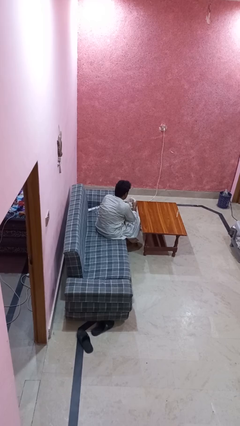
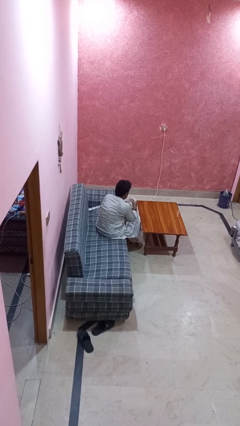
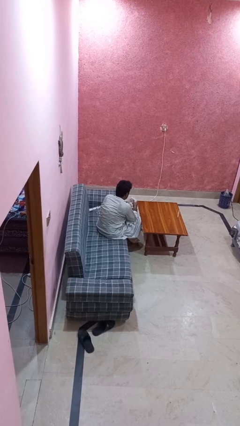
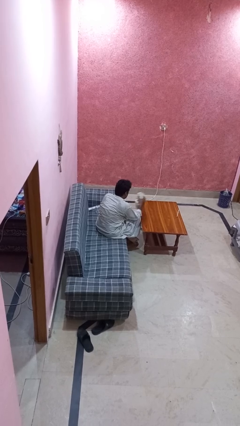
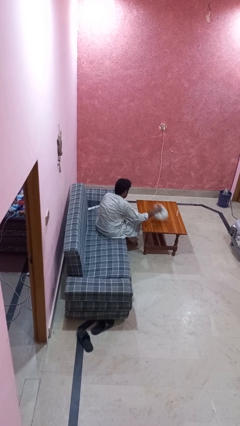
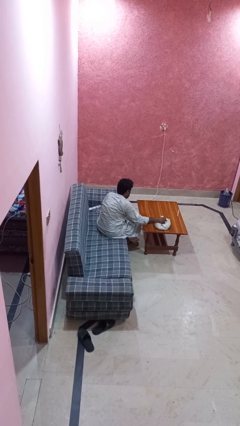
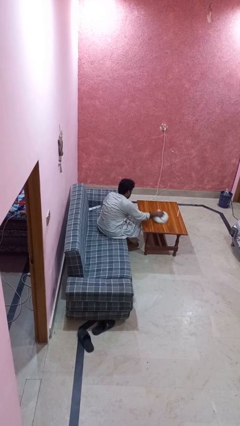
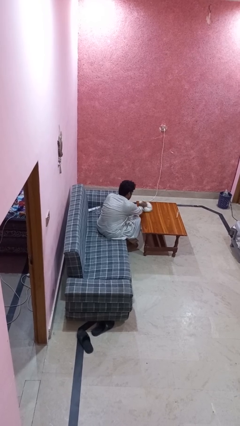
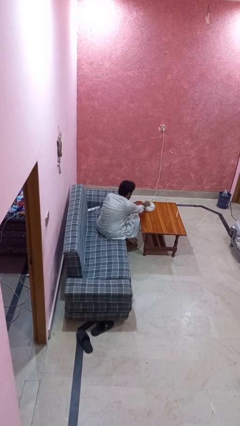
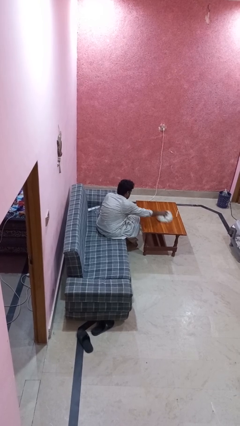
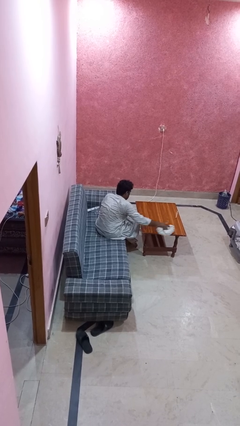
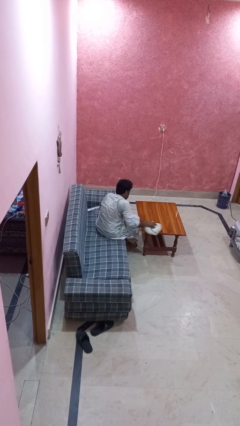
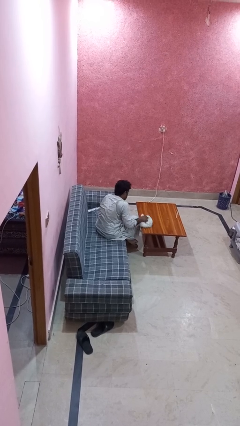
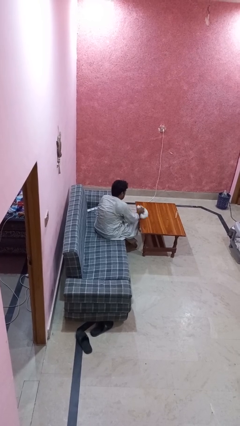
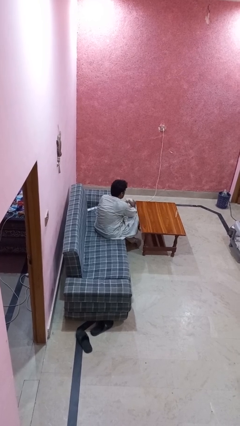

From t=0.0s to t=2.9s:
person cleans table with rag

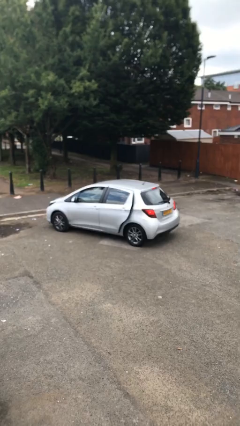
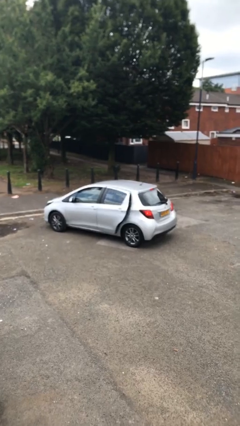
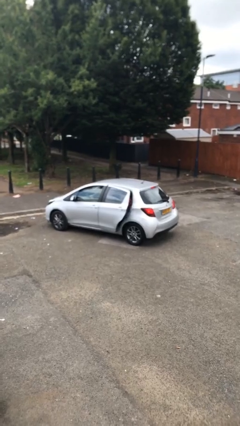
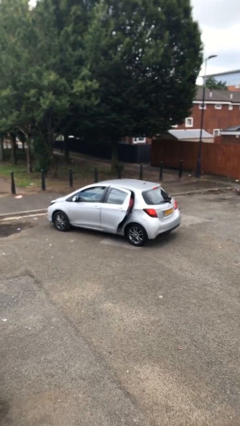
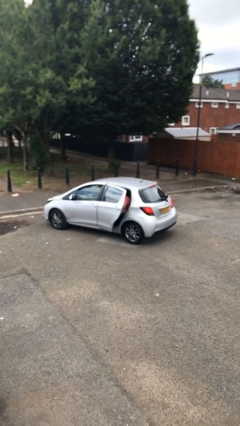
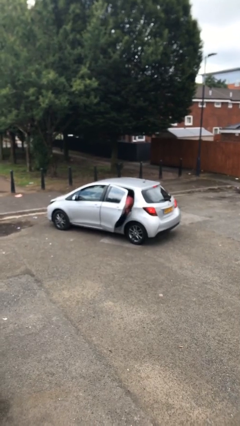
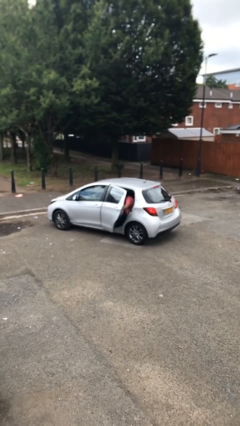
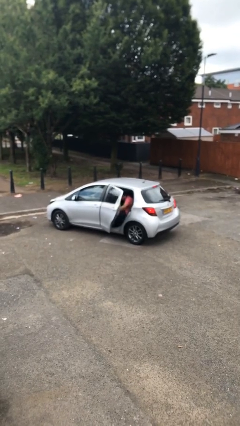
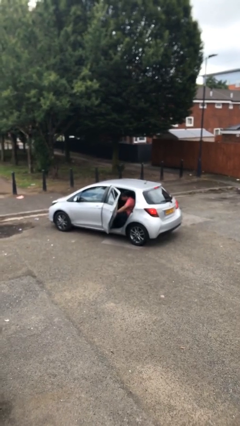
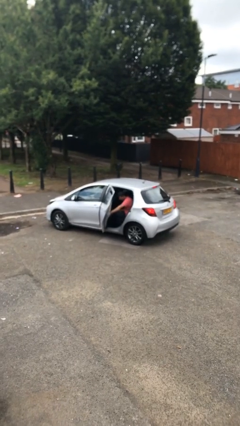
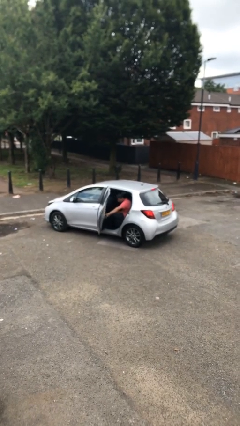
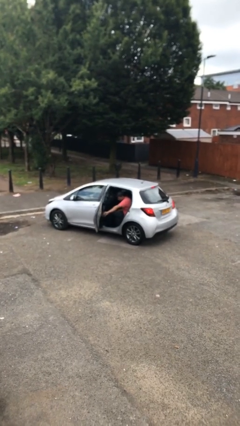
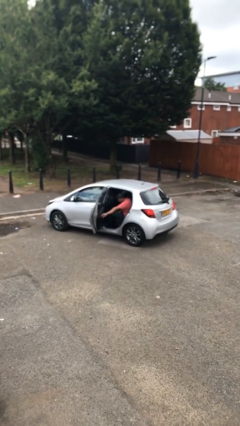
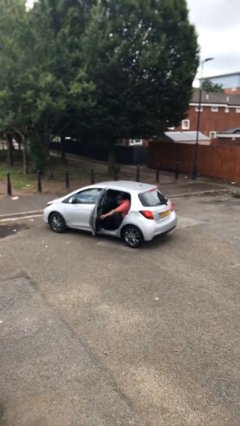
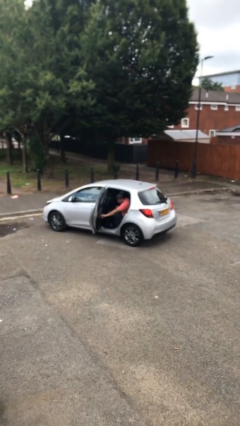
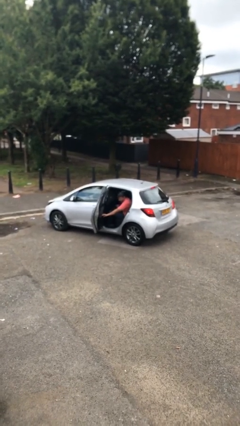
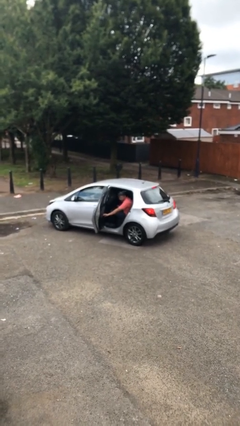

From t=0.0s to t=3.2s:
person opens car door

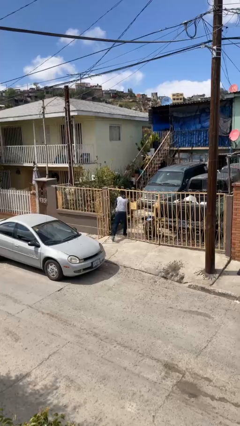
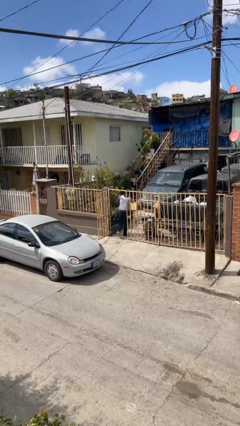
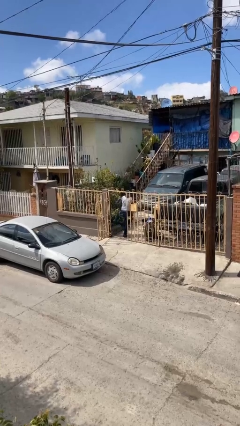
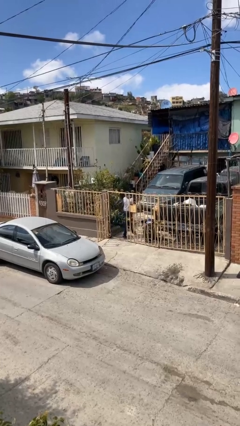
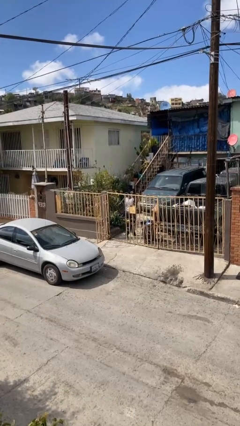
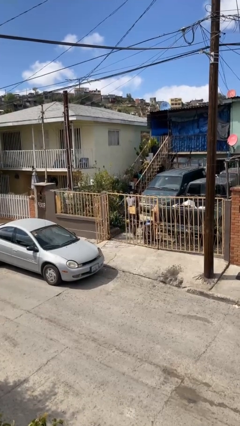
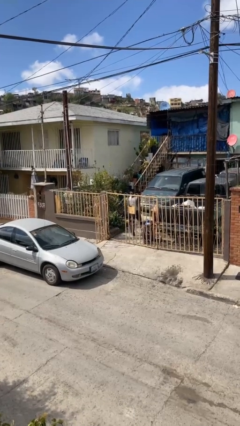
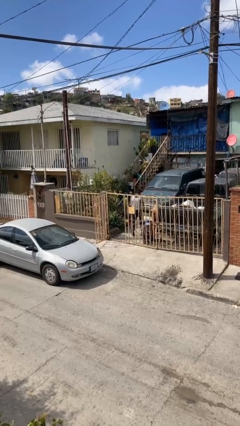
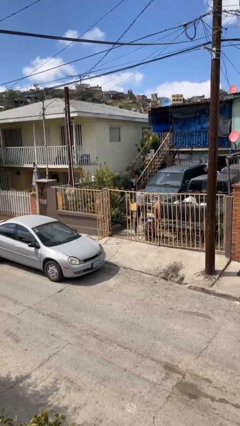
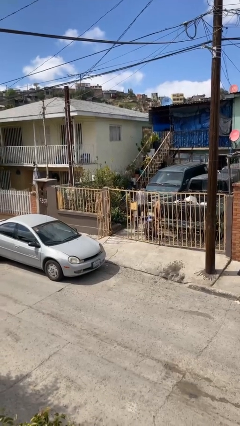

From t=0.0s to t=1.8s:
person exits scene through structure

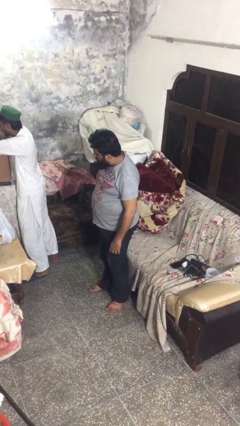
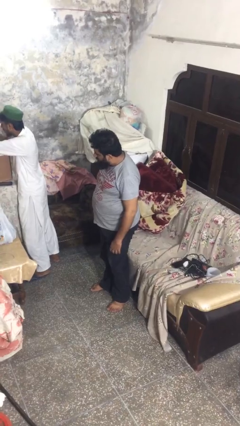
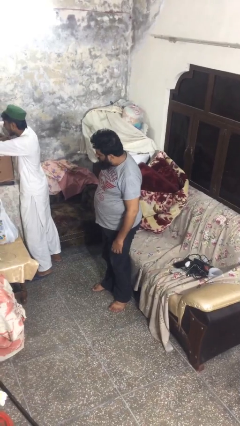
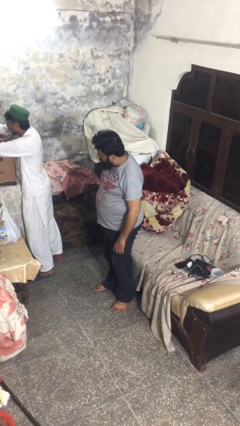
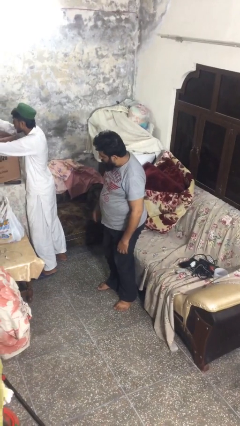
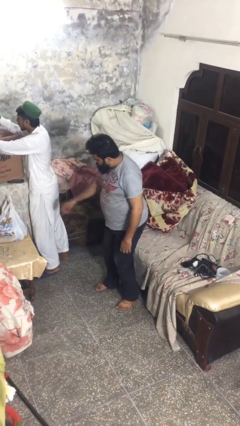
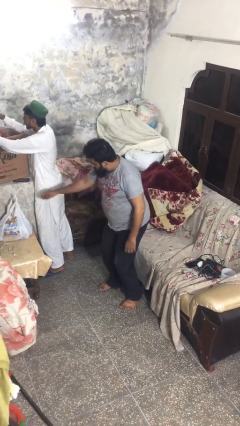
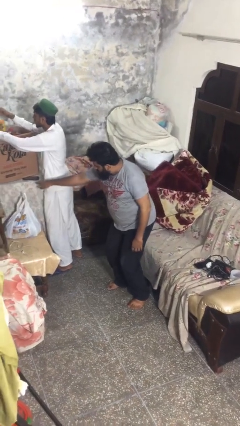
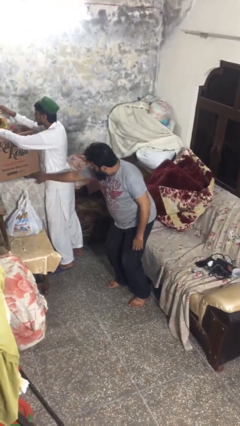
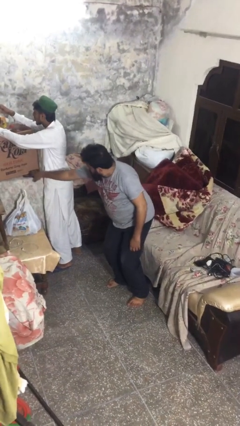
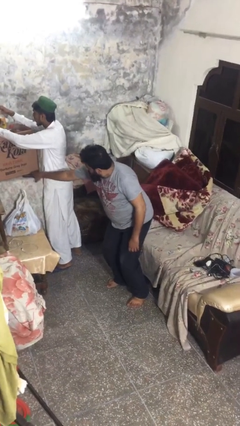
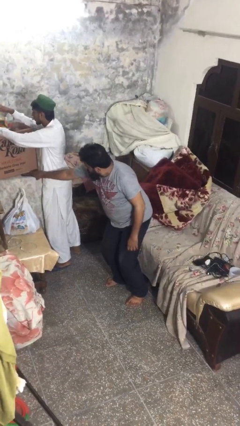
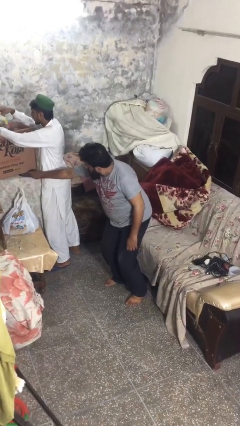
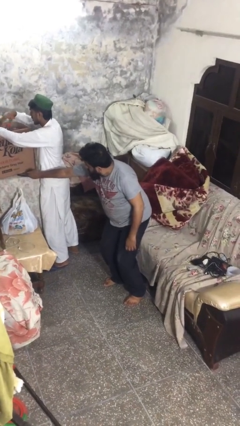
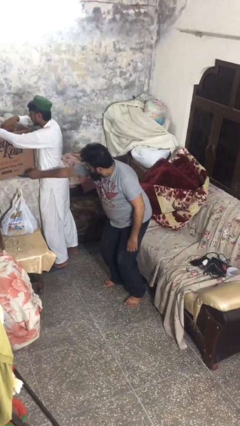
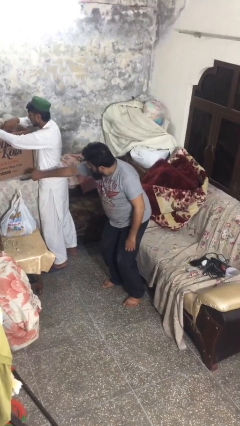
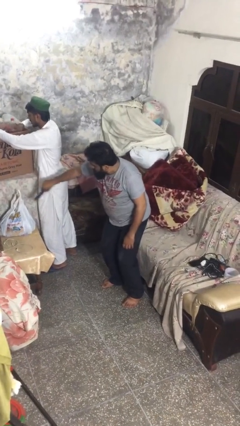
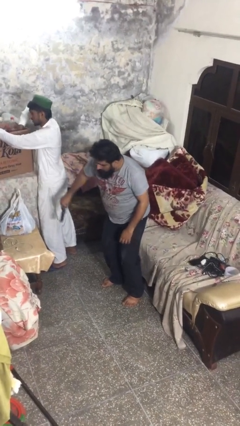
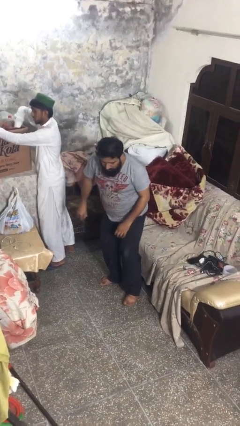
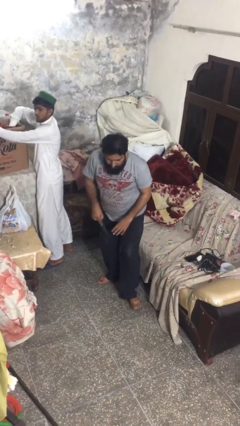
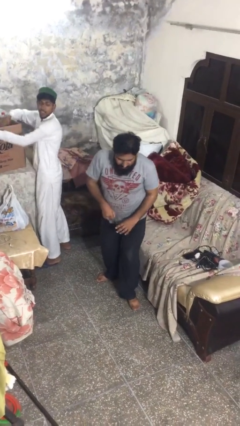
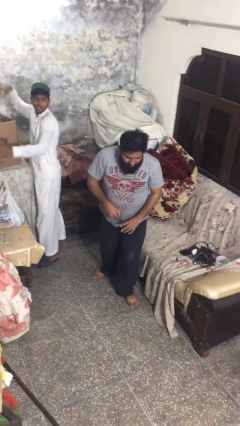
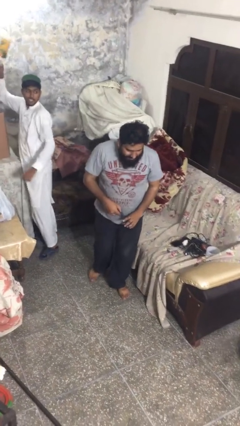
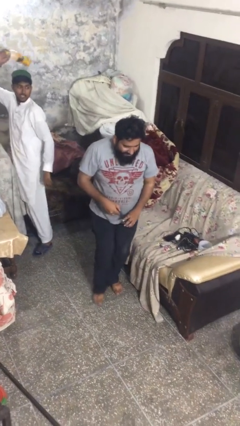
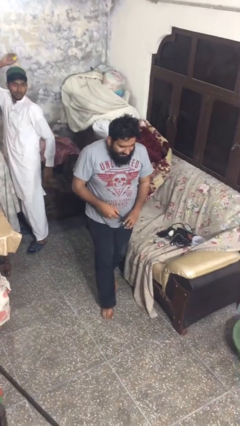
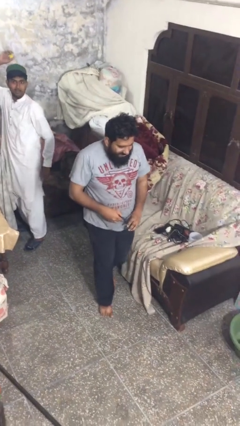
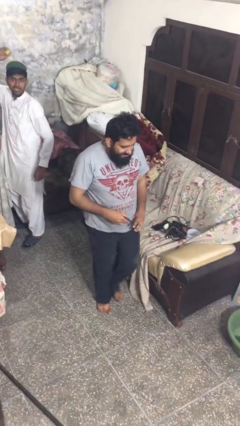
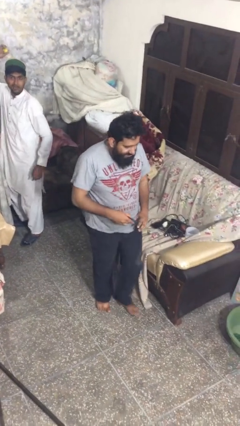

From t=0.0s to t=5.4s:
person steals object from person

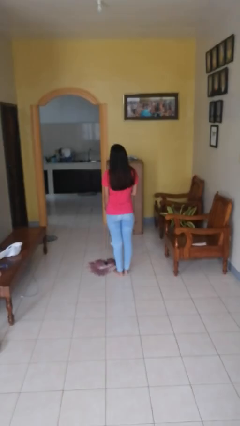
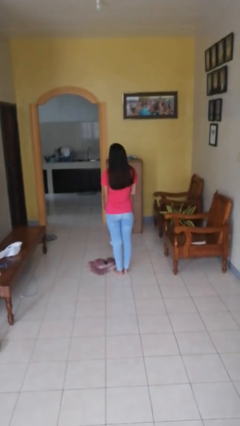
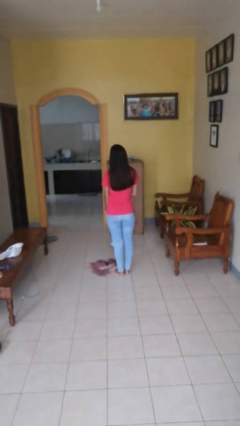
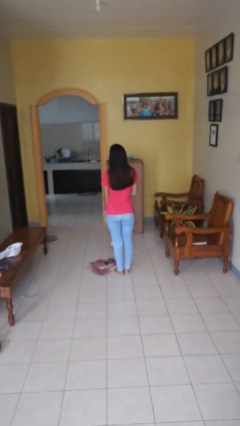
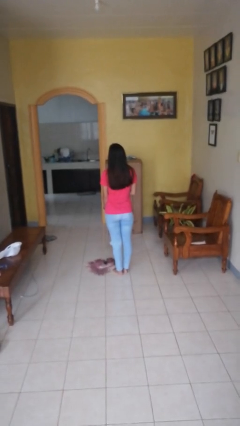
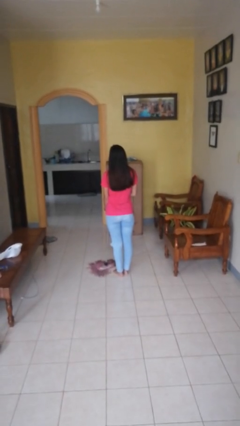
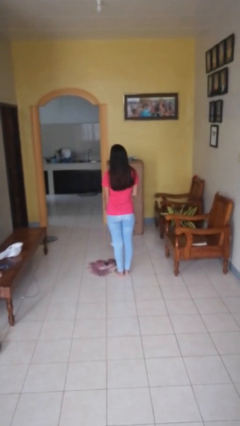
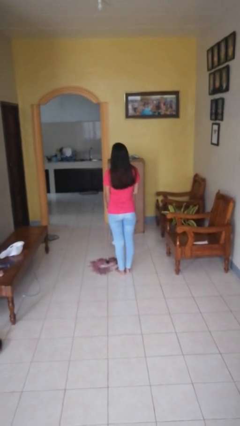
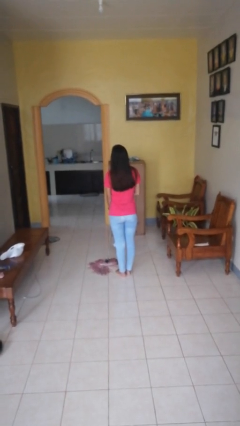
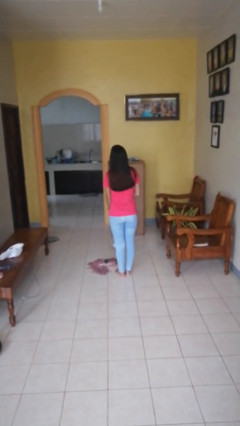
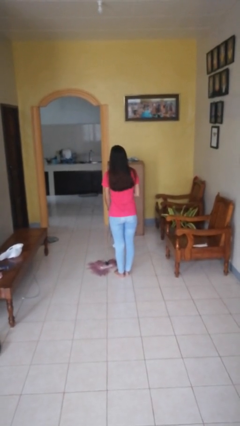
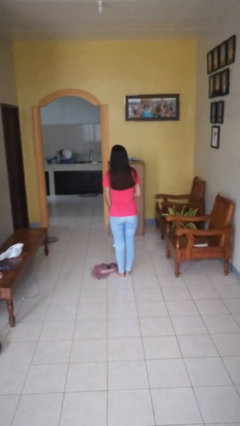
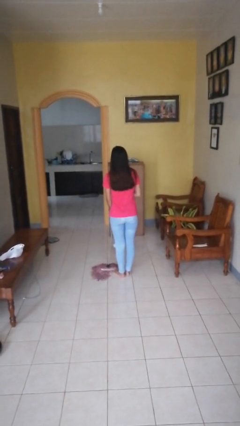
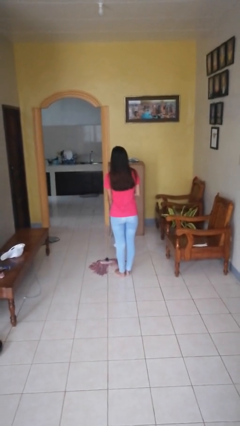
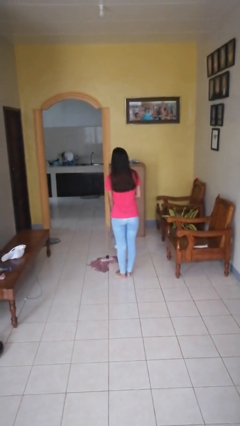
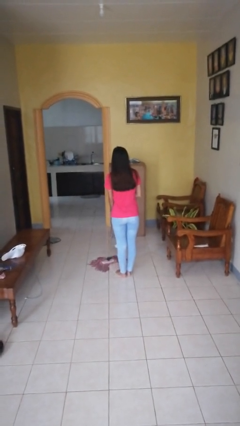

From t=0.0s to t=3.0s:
person mops

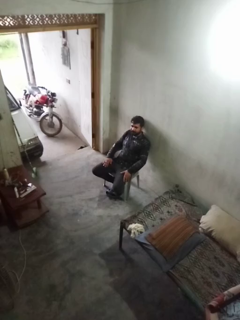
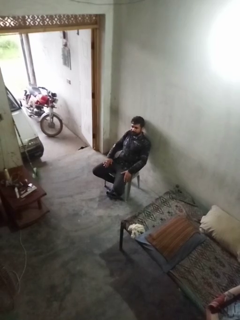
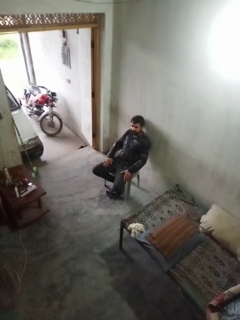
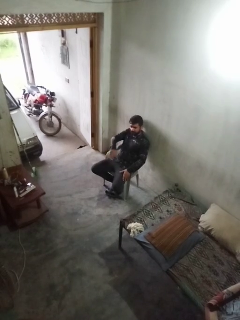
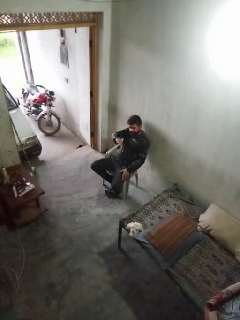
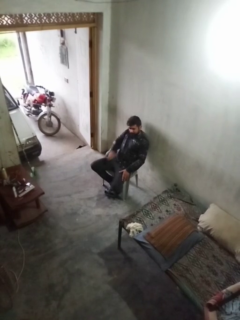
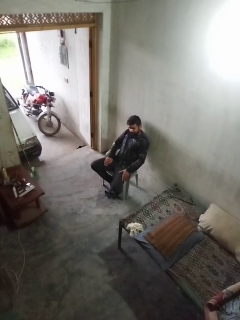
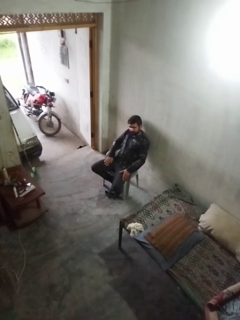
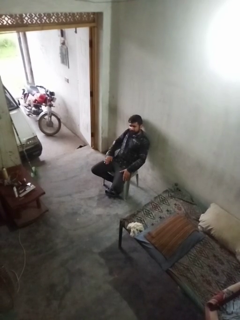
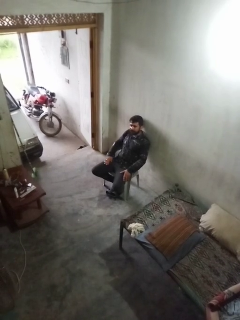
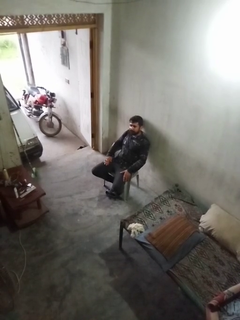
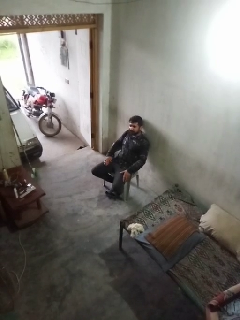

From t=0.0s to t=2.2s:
person slaps hands on thighs
